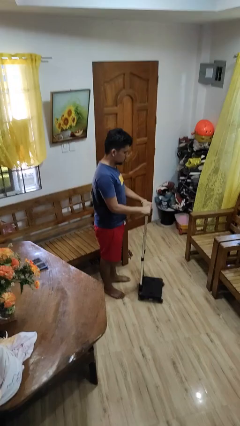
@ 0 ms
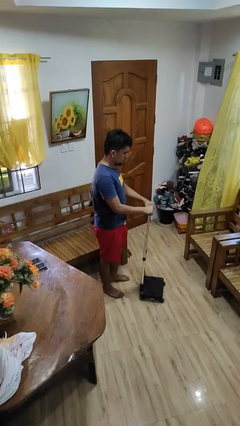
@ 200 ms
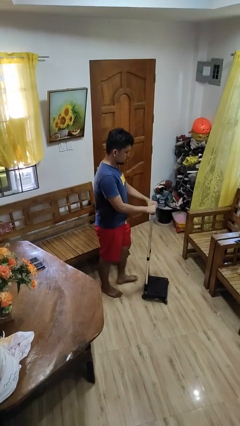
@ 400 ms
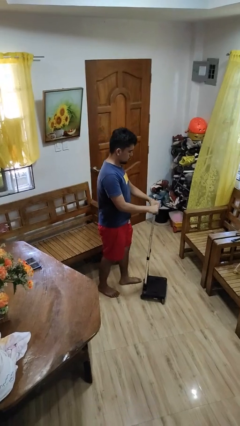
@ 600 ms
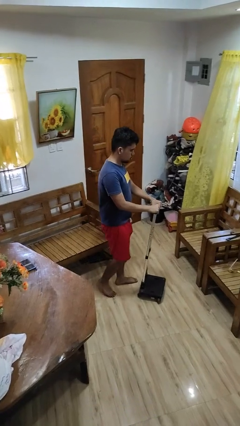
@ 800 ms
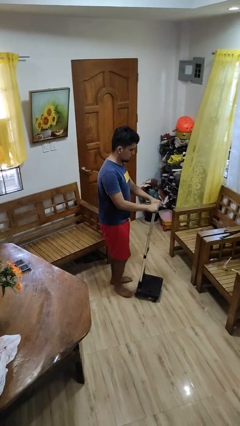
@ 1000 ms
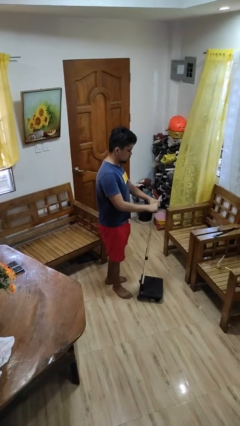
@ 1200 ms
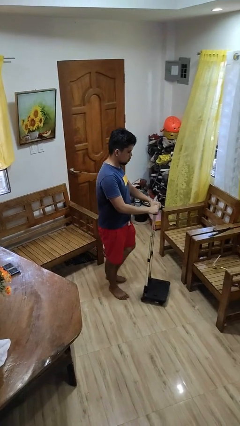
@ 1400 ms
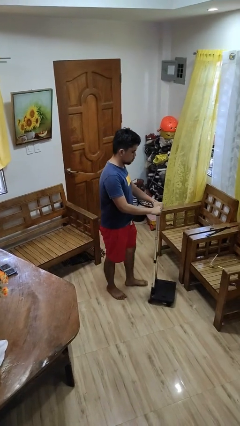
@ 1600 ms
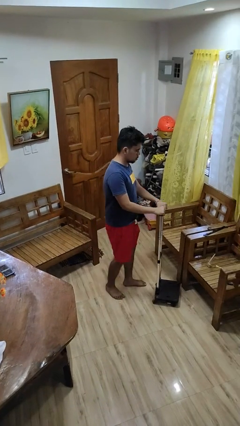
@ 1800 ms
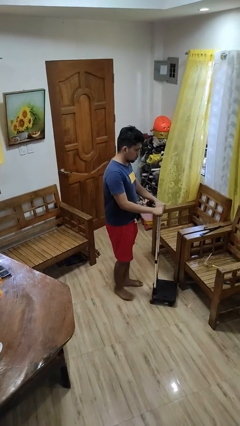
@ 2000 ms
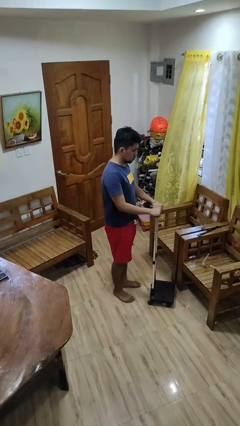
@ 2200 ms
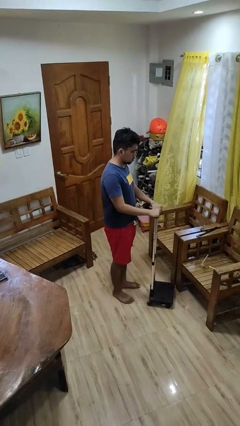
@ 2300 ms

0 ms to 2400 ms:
person pushes wheeled cart

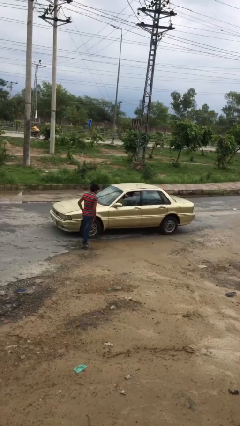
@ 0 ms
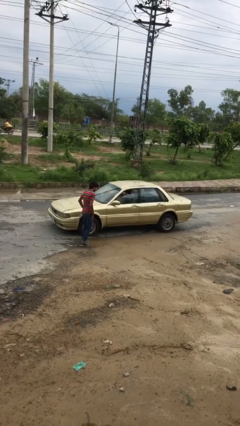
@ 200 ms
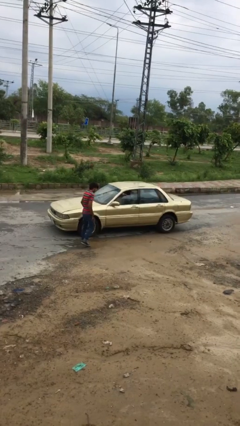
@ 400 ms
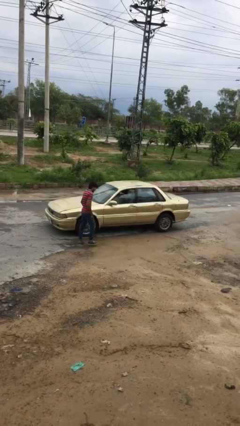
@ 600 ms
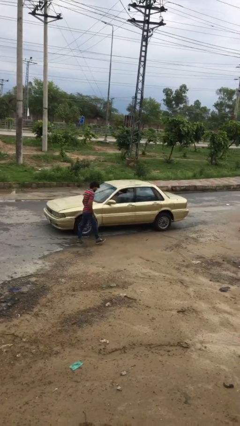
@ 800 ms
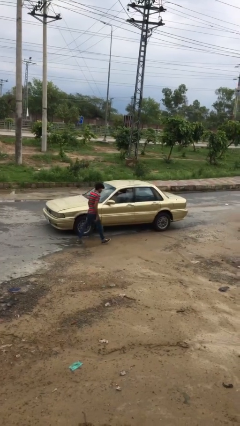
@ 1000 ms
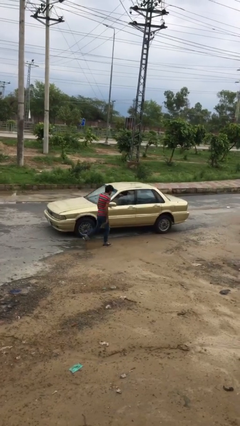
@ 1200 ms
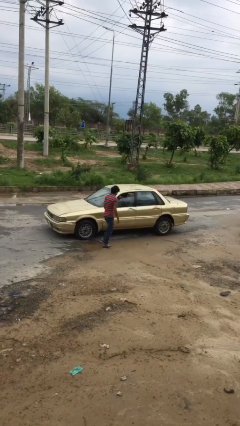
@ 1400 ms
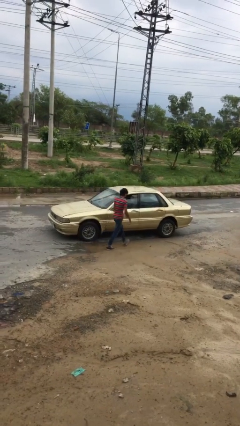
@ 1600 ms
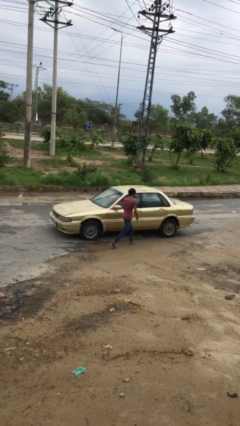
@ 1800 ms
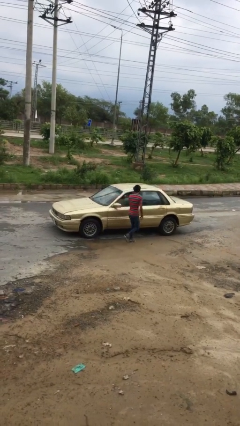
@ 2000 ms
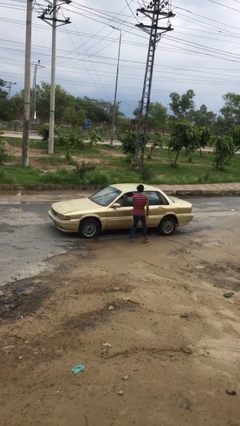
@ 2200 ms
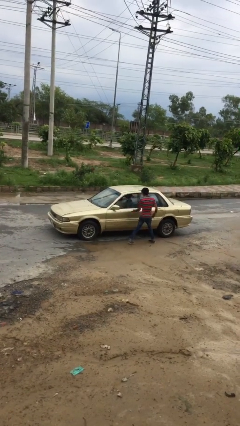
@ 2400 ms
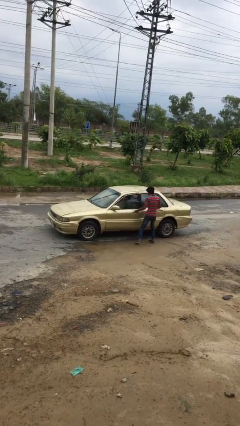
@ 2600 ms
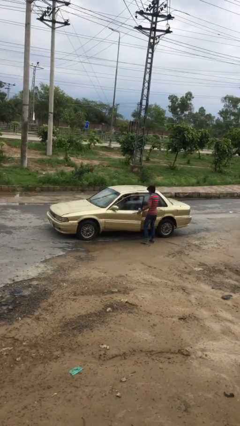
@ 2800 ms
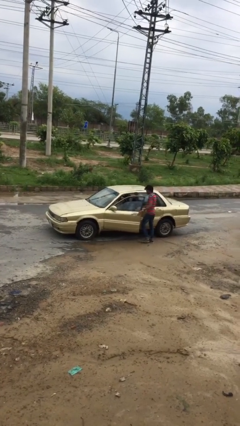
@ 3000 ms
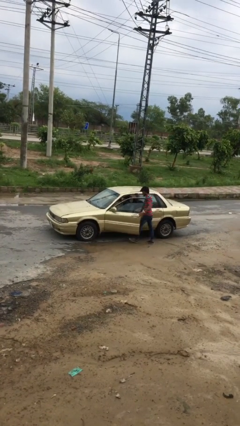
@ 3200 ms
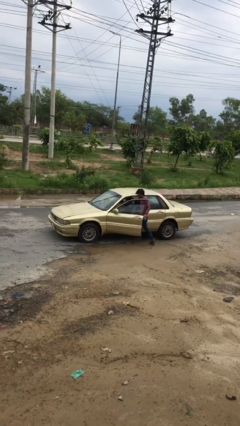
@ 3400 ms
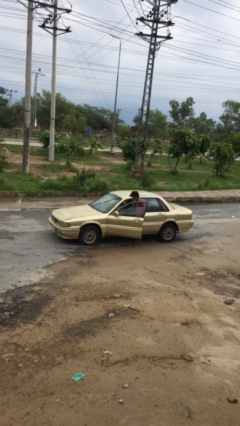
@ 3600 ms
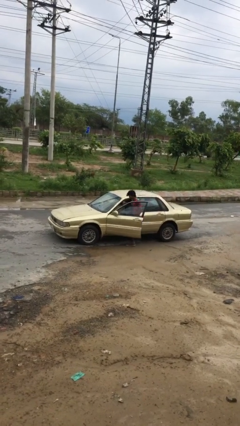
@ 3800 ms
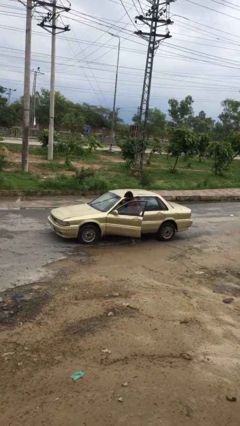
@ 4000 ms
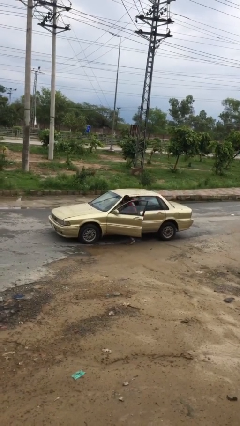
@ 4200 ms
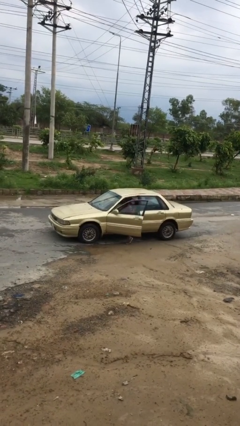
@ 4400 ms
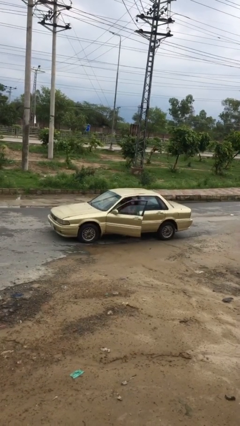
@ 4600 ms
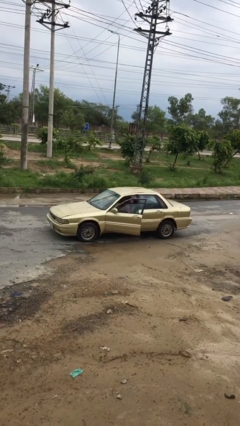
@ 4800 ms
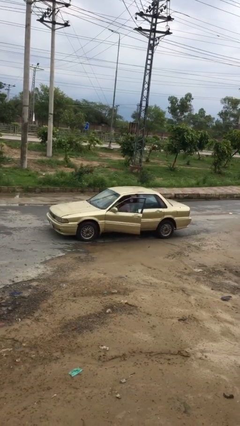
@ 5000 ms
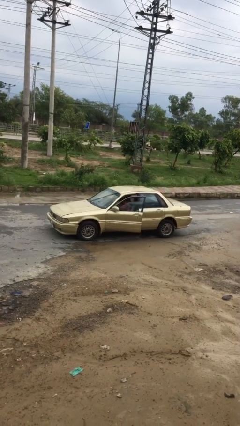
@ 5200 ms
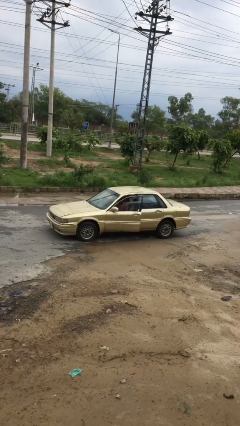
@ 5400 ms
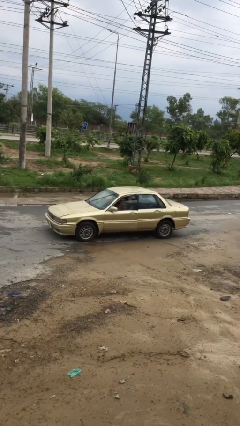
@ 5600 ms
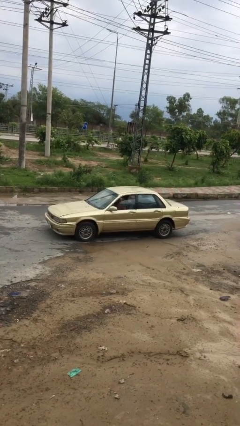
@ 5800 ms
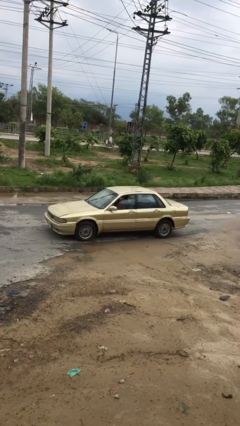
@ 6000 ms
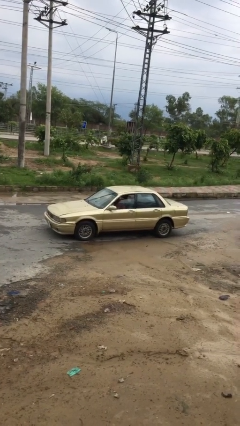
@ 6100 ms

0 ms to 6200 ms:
car picks up person

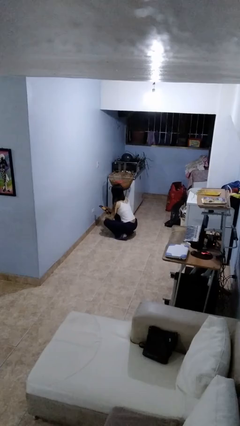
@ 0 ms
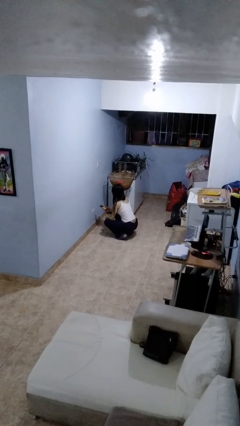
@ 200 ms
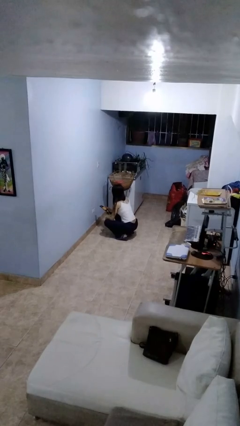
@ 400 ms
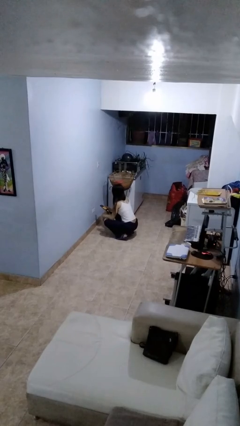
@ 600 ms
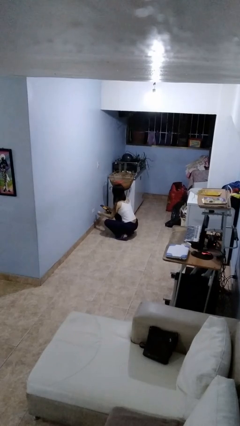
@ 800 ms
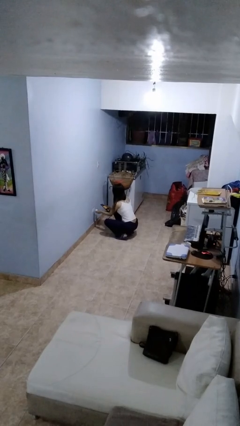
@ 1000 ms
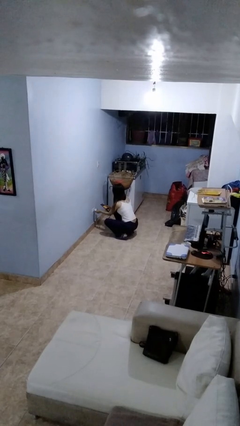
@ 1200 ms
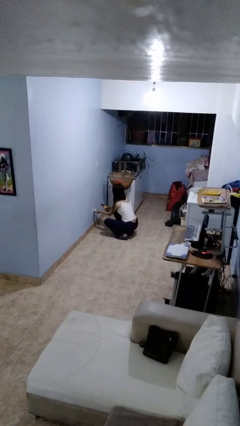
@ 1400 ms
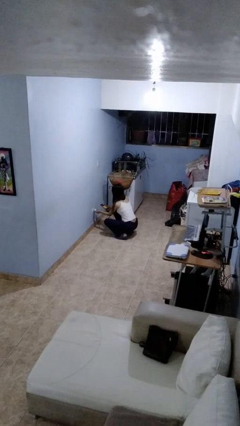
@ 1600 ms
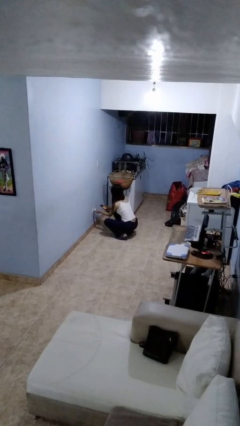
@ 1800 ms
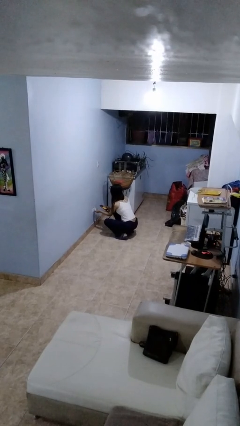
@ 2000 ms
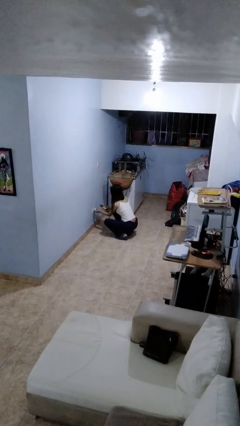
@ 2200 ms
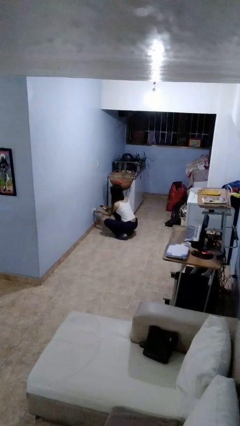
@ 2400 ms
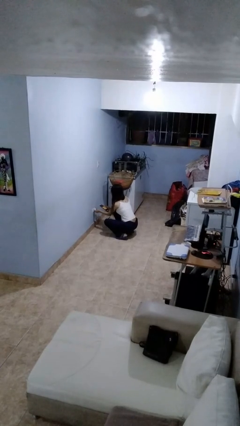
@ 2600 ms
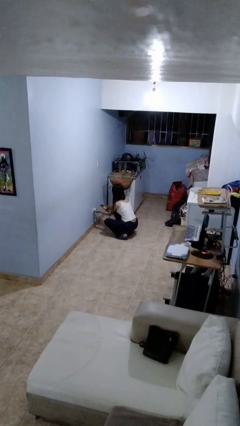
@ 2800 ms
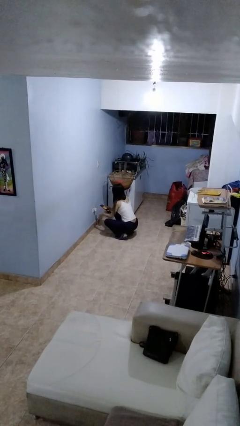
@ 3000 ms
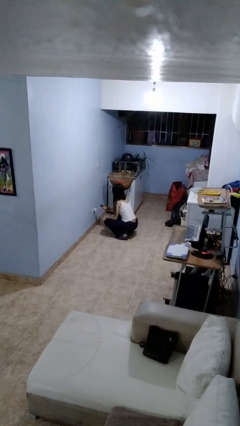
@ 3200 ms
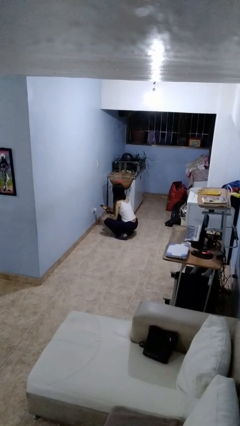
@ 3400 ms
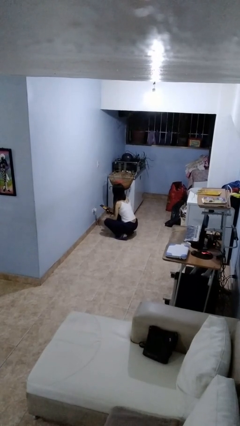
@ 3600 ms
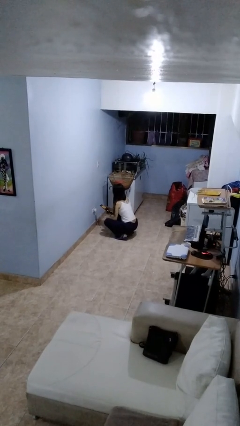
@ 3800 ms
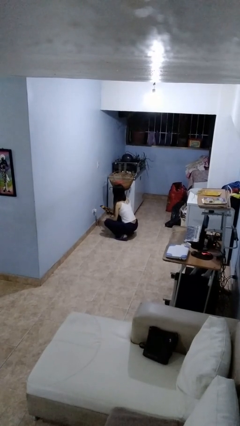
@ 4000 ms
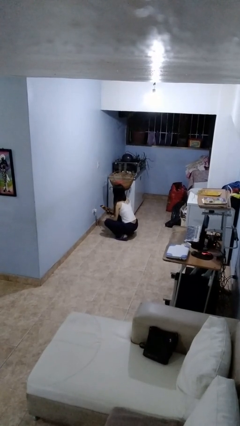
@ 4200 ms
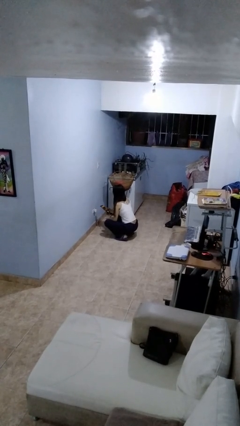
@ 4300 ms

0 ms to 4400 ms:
person plugs into electrical socket

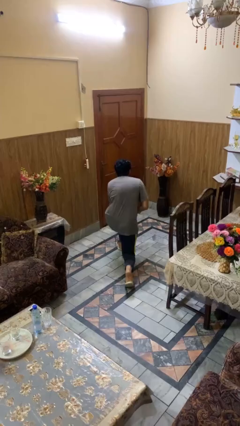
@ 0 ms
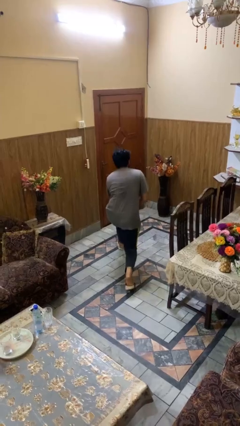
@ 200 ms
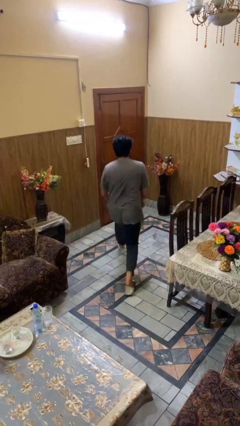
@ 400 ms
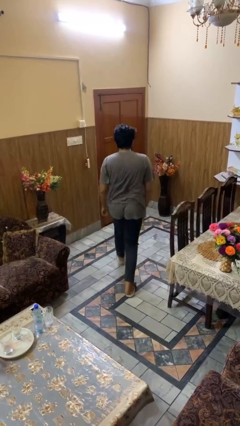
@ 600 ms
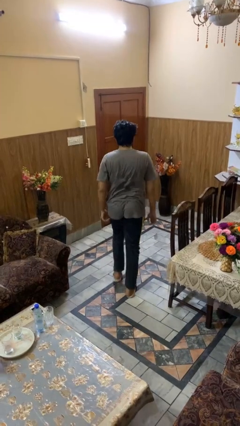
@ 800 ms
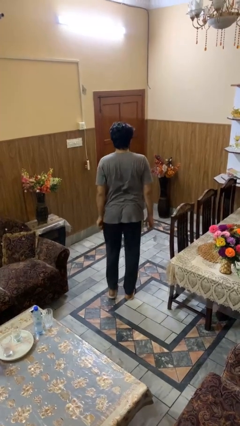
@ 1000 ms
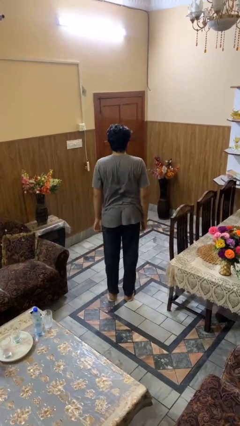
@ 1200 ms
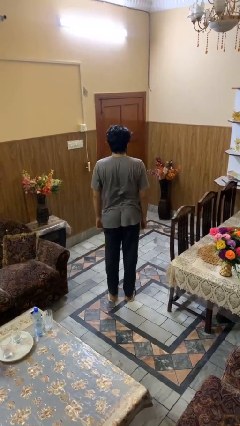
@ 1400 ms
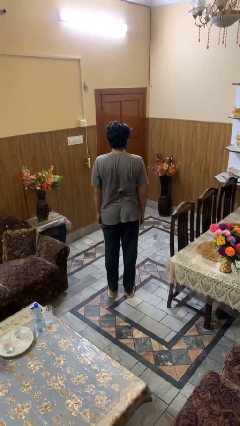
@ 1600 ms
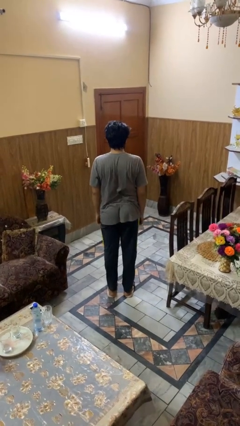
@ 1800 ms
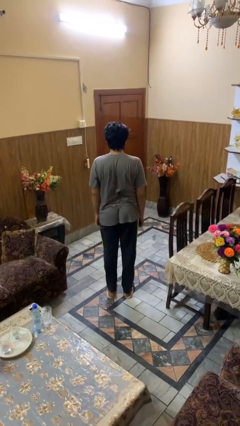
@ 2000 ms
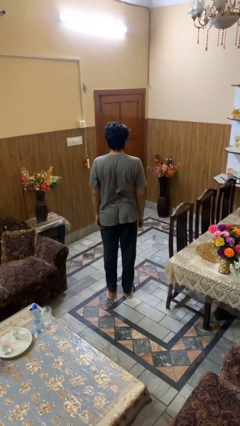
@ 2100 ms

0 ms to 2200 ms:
person stands up from floor

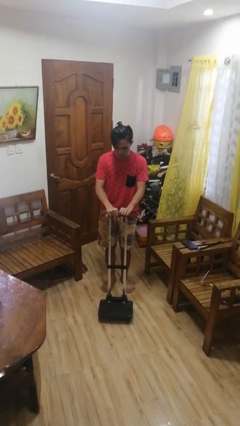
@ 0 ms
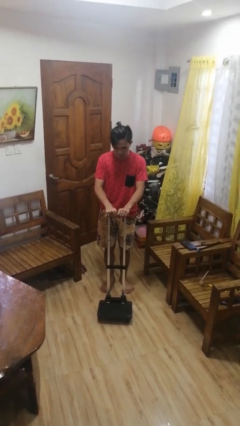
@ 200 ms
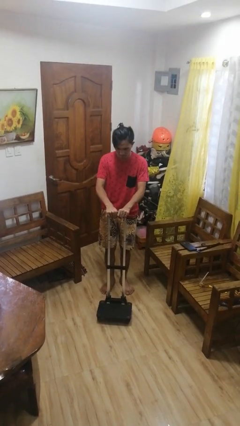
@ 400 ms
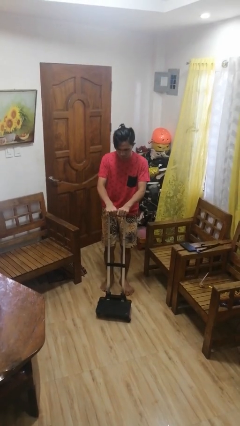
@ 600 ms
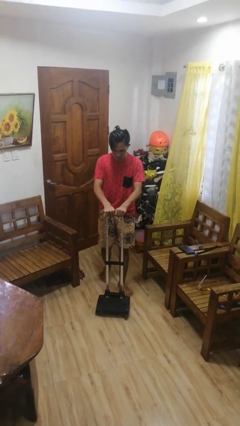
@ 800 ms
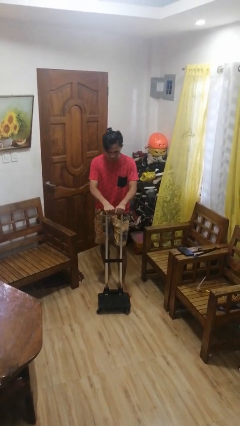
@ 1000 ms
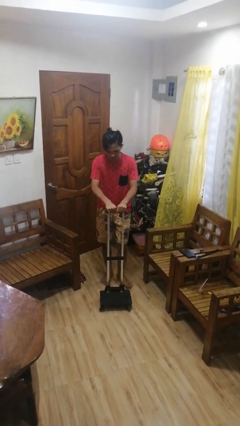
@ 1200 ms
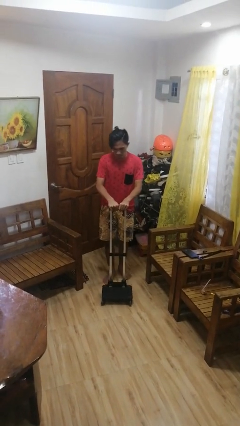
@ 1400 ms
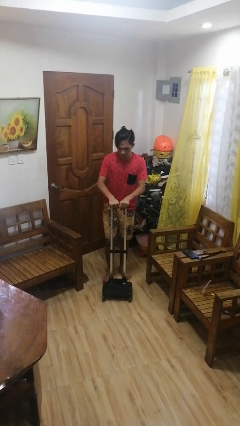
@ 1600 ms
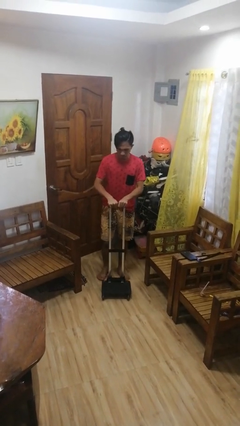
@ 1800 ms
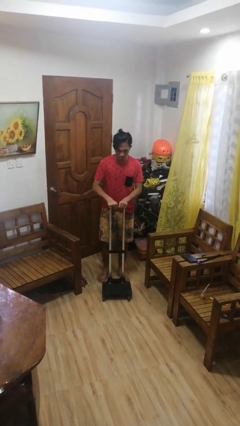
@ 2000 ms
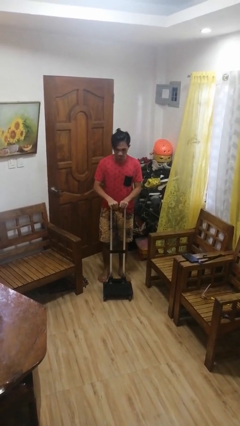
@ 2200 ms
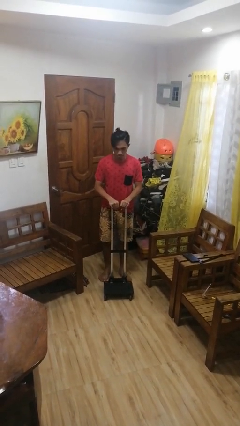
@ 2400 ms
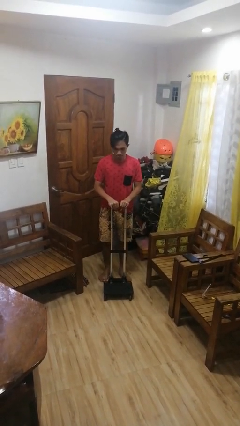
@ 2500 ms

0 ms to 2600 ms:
person pulls wheeled cart
